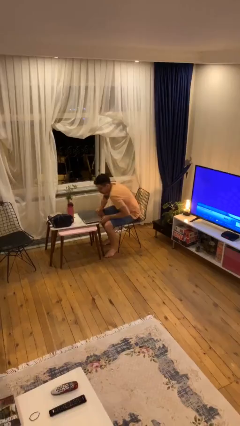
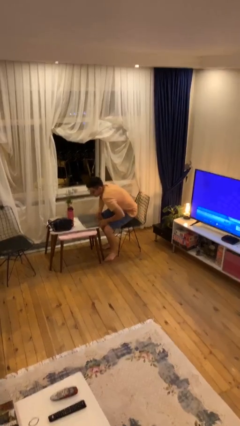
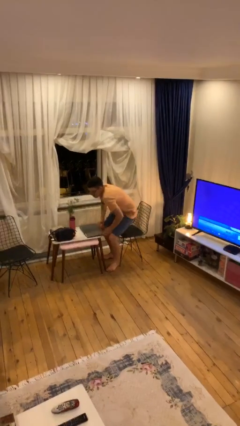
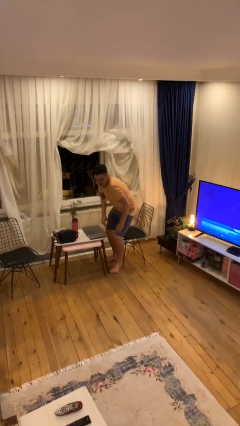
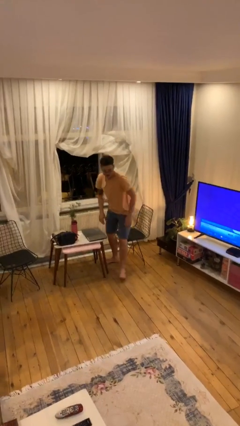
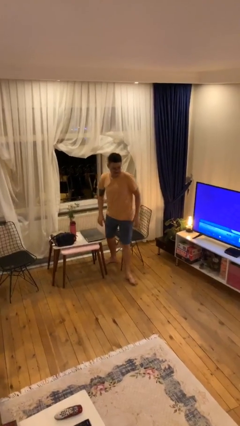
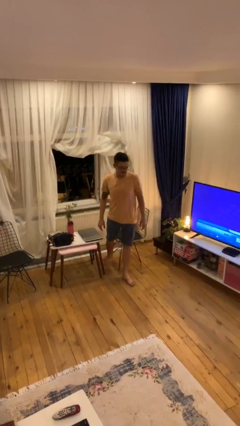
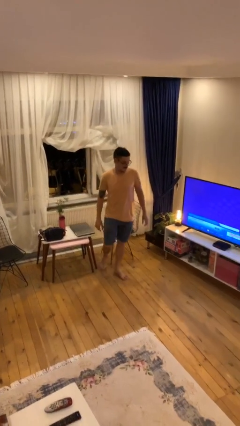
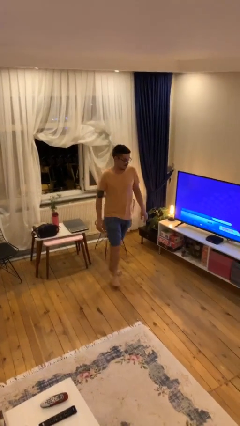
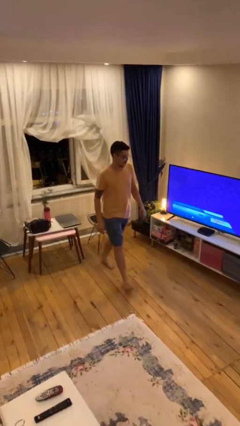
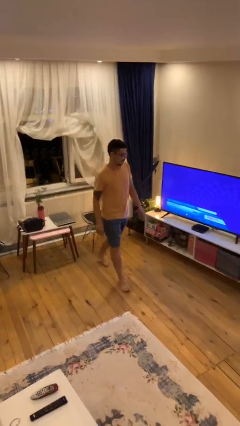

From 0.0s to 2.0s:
person stands up

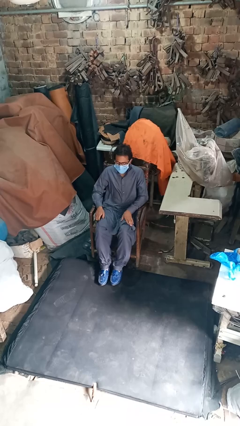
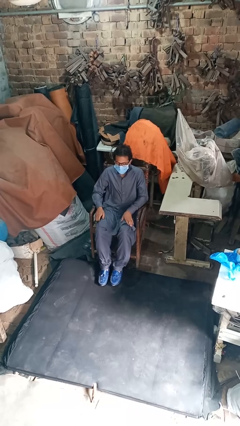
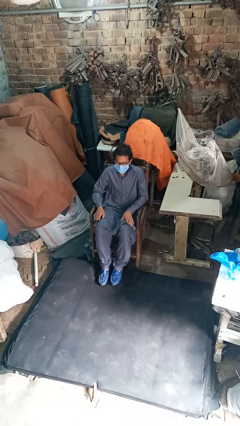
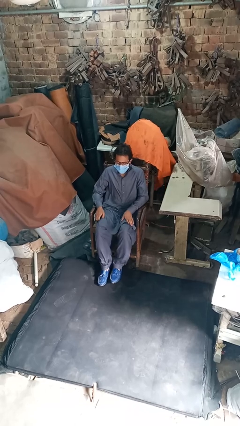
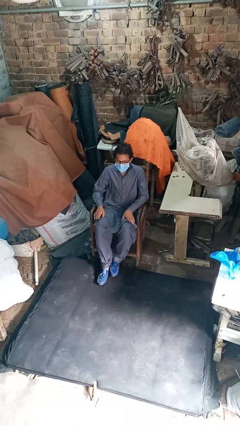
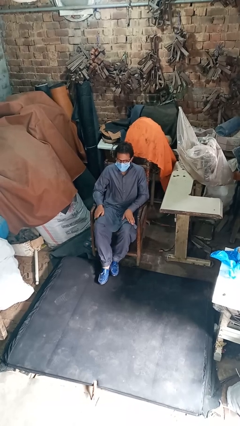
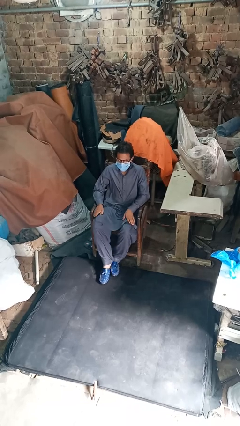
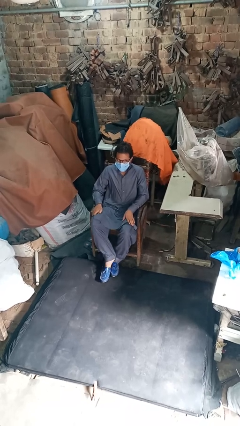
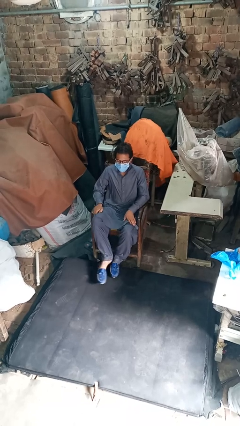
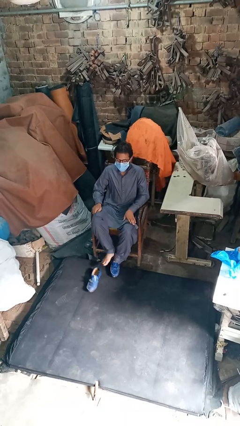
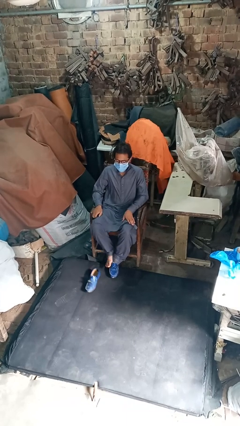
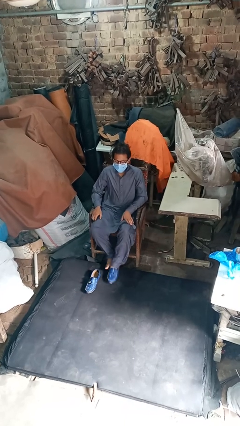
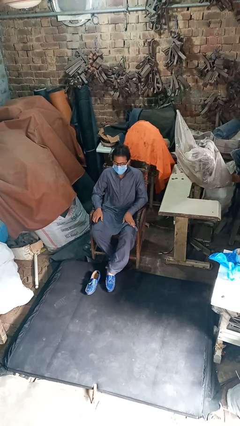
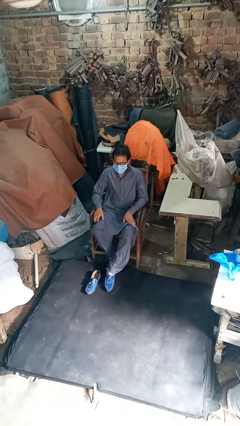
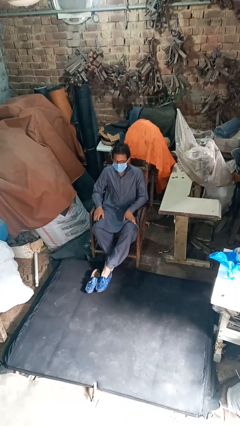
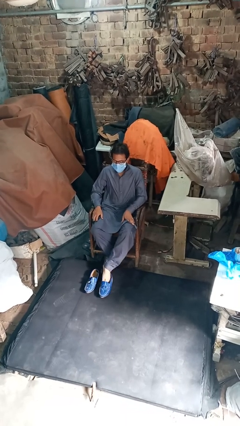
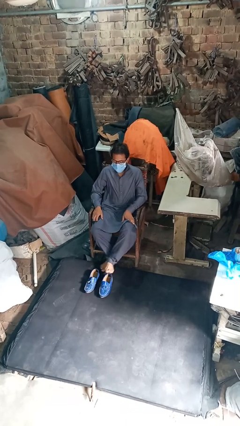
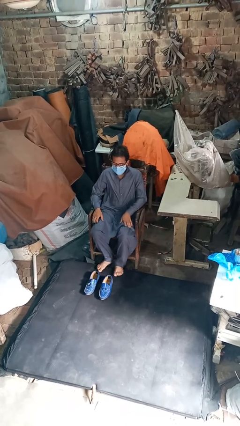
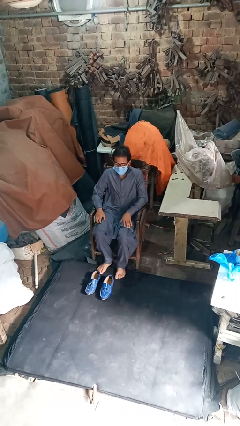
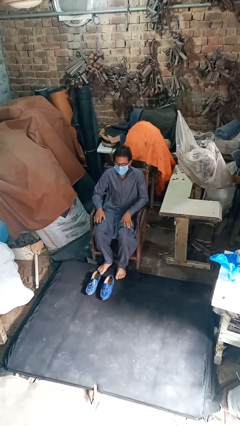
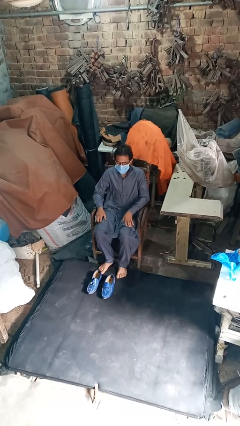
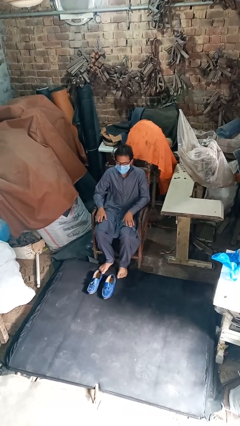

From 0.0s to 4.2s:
person takes off shoes

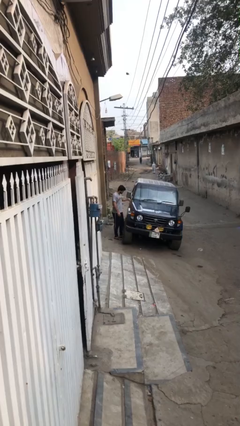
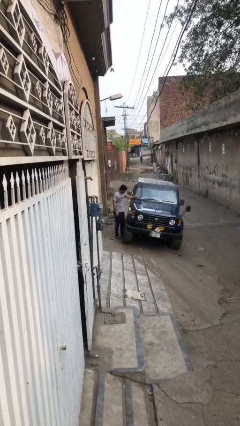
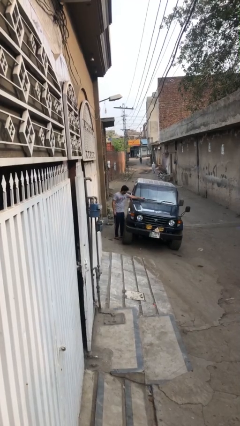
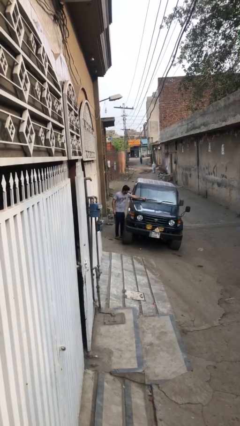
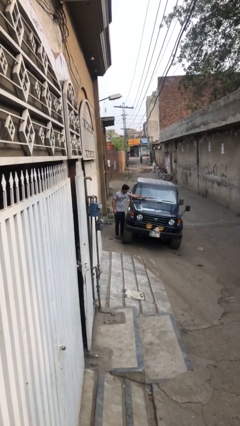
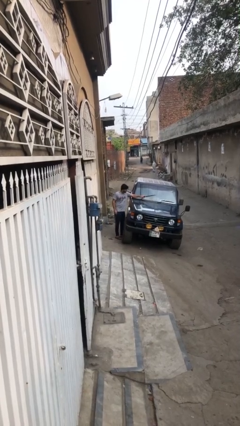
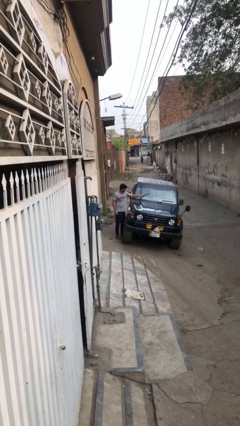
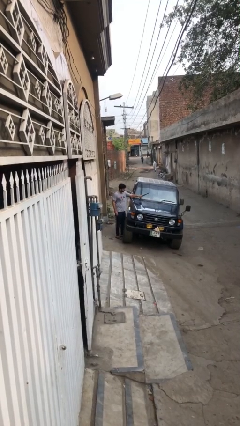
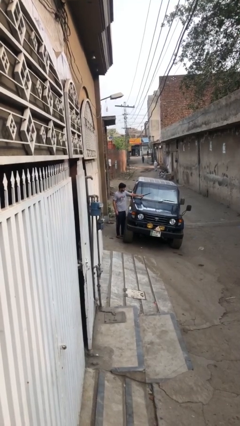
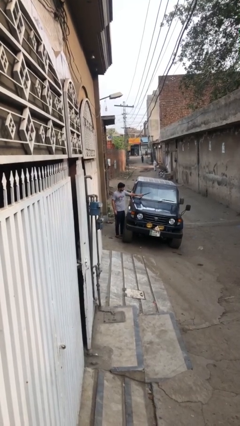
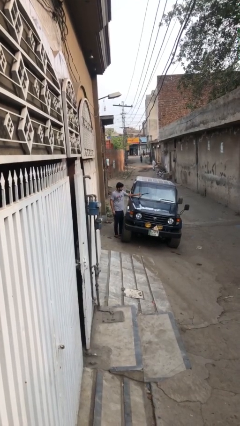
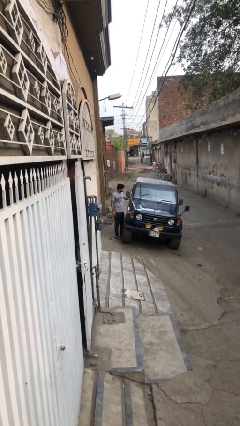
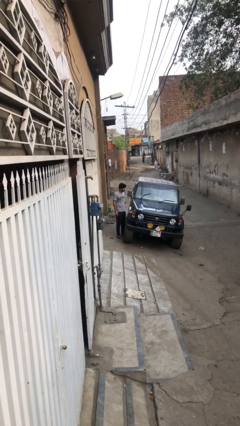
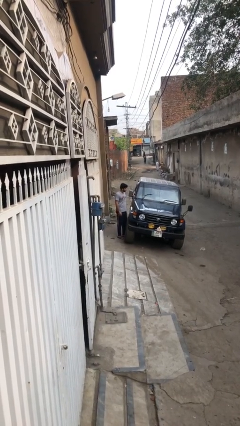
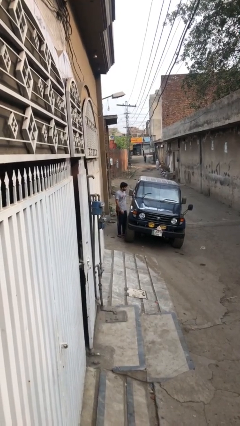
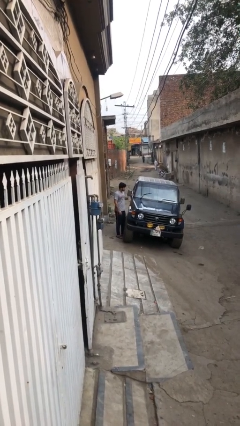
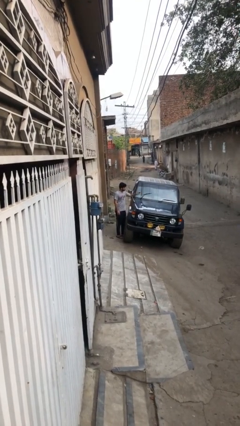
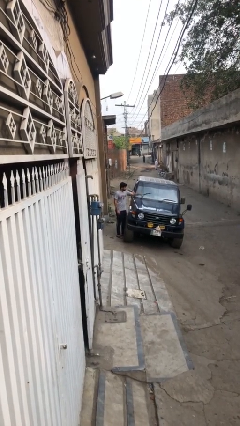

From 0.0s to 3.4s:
person flips up car wipers

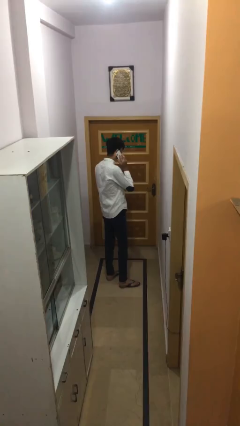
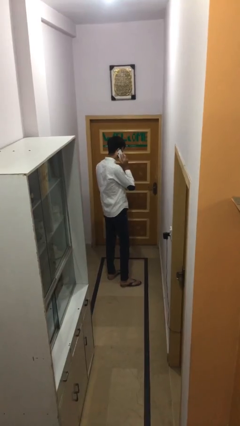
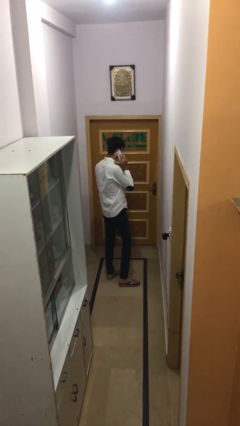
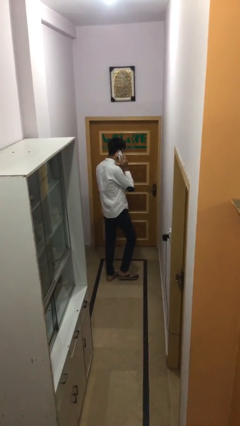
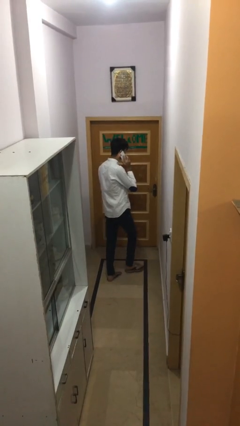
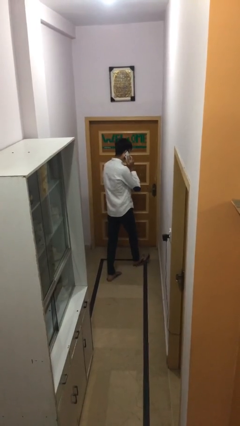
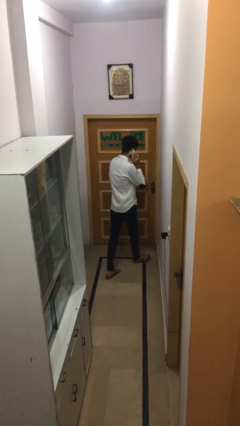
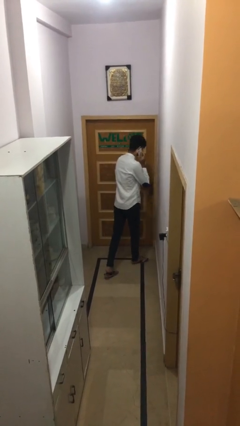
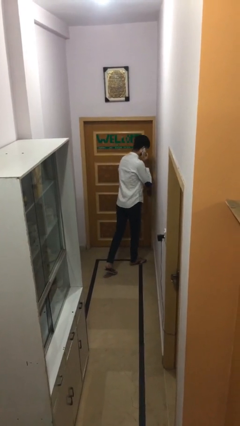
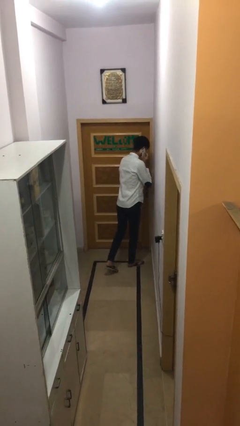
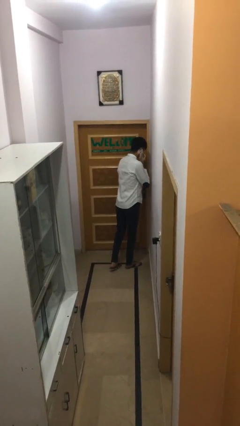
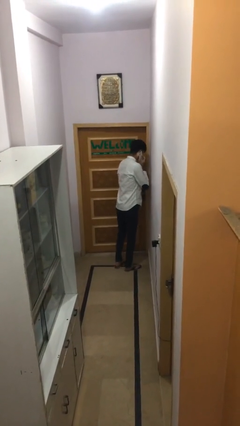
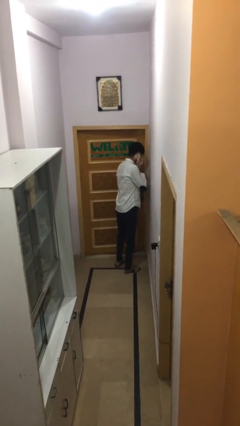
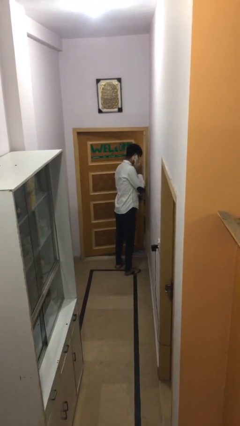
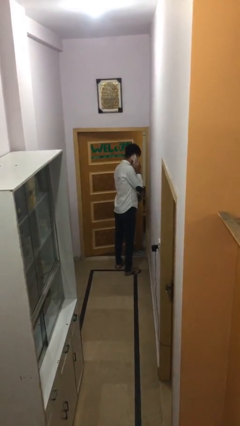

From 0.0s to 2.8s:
person opens facility door

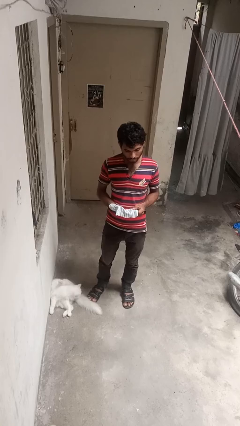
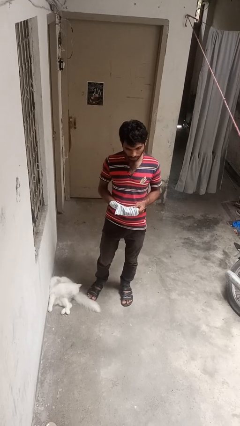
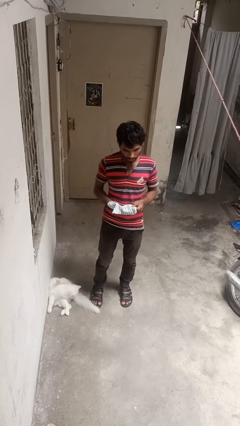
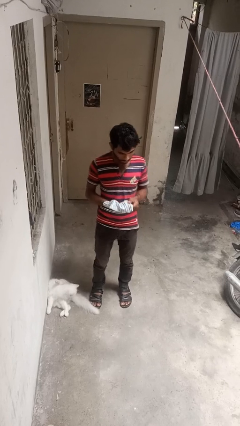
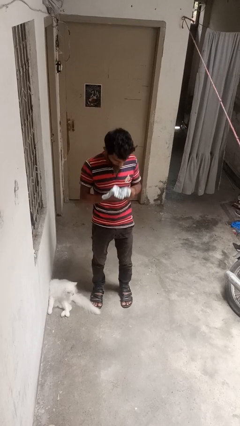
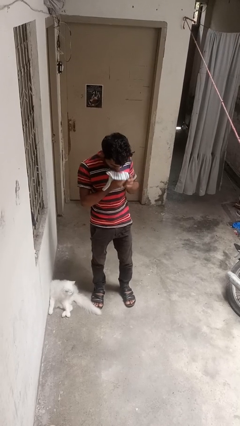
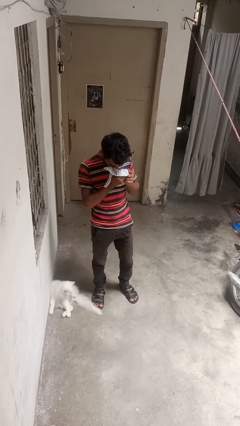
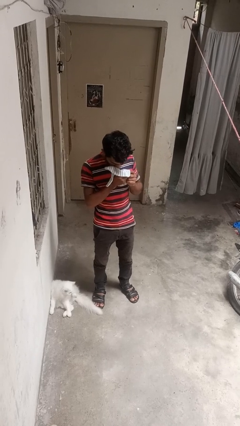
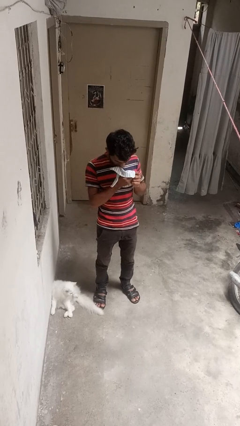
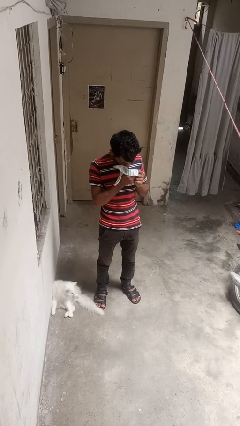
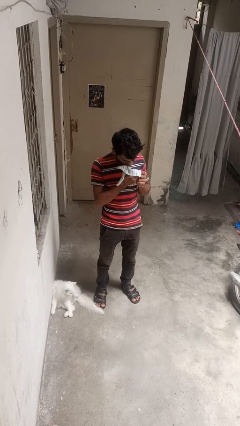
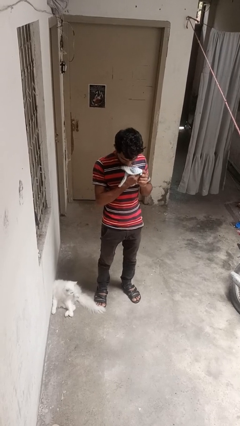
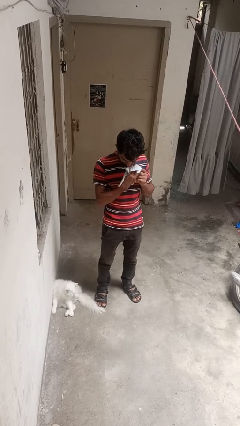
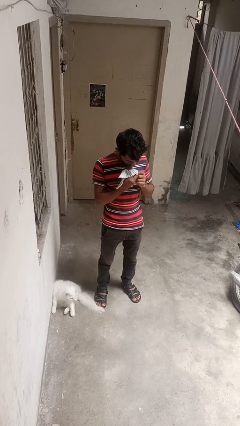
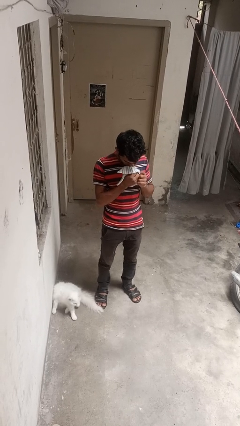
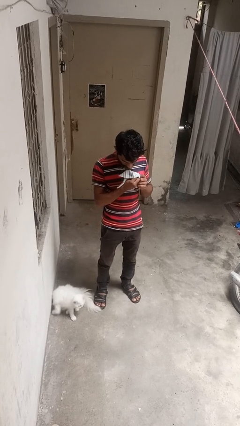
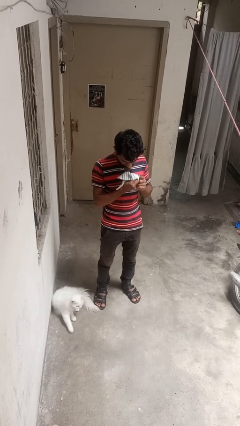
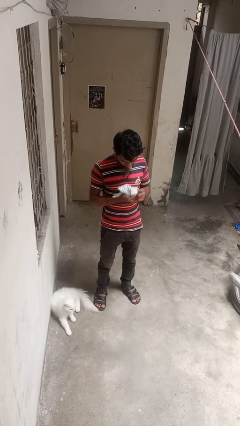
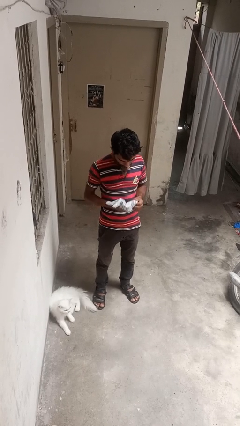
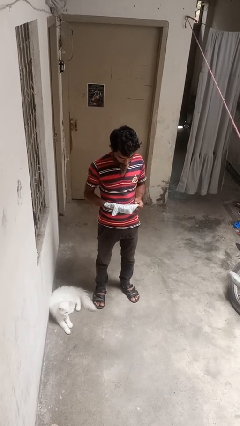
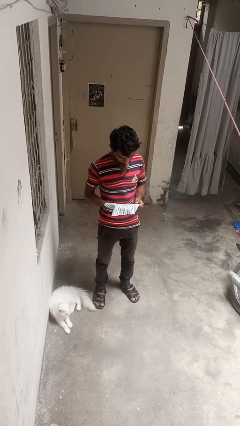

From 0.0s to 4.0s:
person blows nose

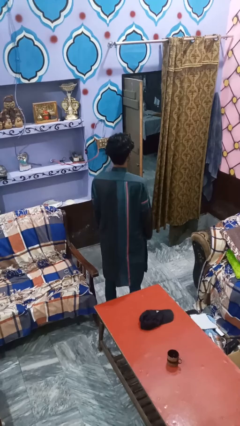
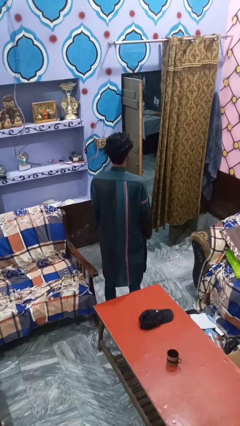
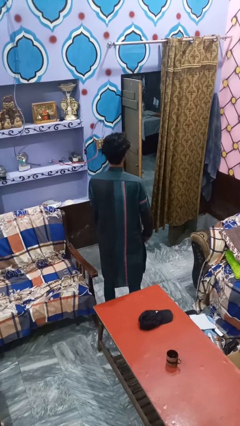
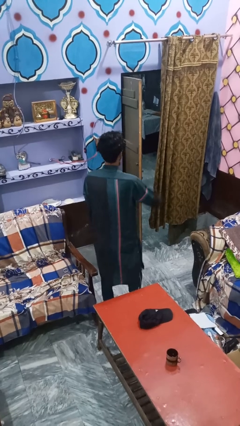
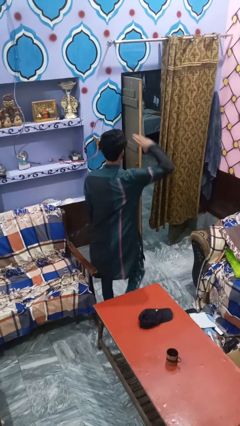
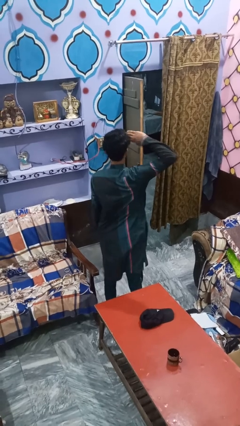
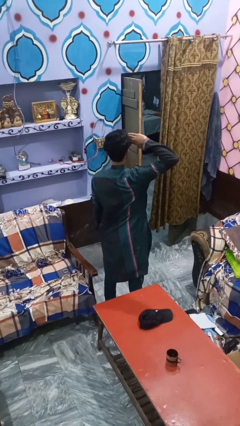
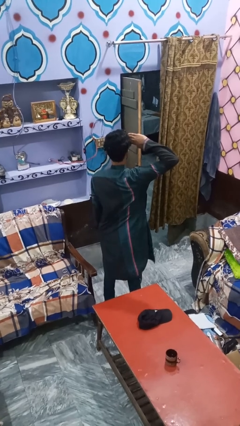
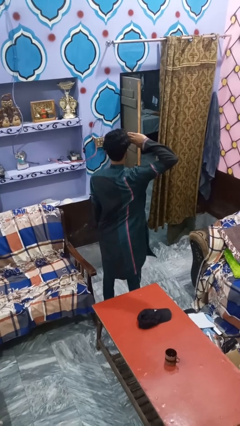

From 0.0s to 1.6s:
person salutes
